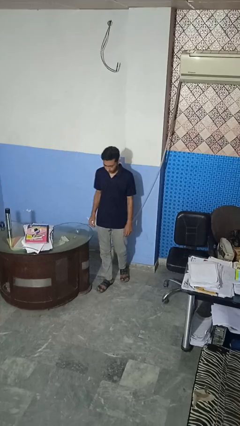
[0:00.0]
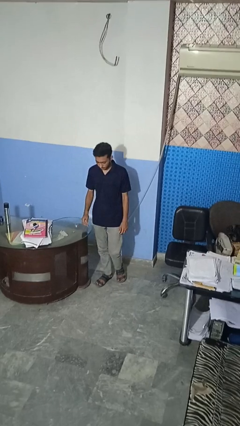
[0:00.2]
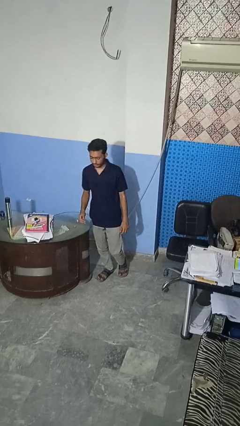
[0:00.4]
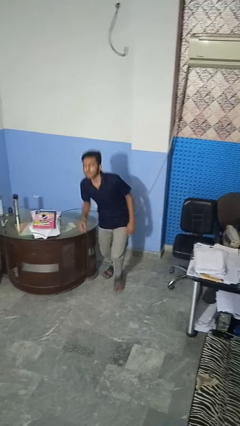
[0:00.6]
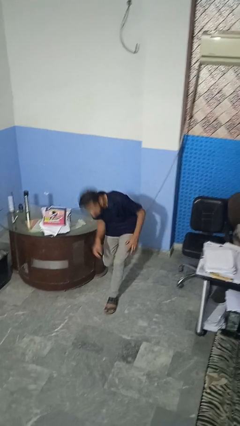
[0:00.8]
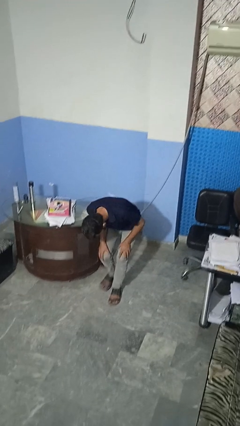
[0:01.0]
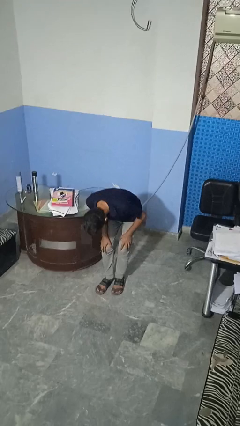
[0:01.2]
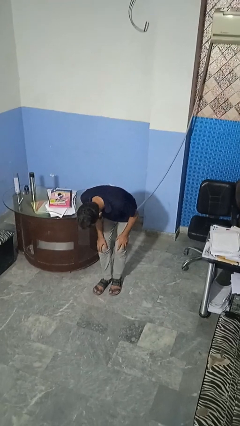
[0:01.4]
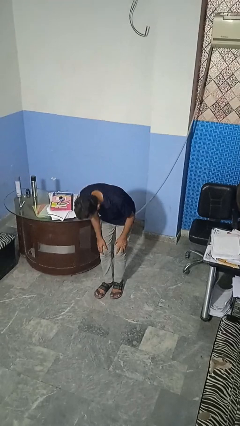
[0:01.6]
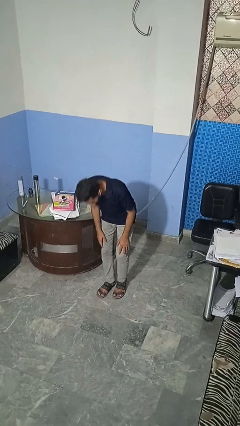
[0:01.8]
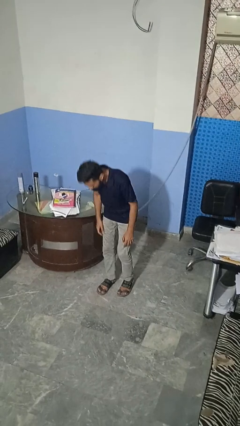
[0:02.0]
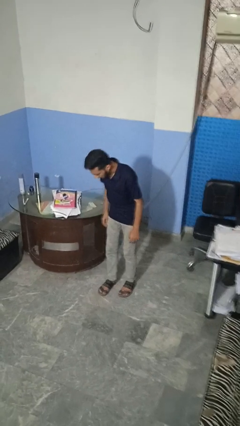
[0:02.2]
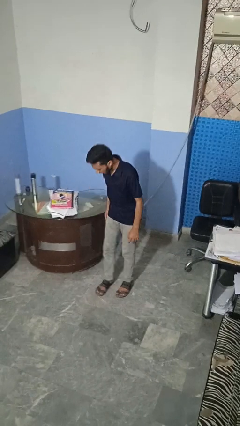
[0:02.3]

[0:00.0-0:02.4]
person bumps into table

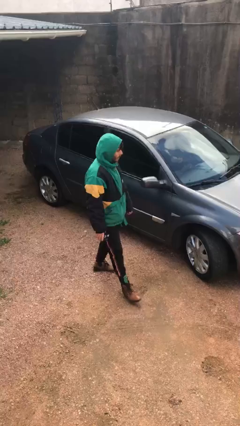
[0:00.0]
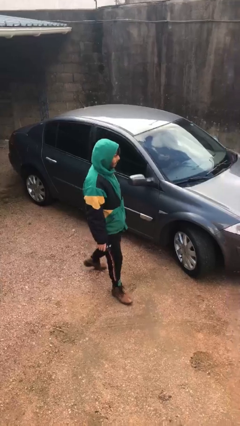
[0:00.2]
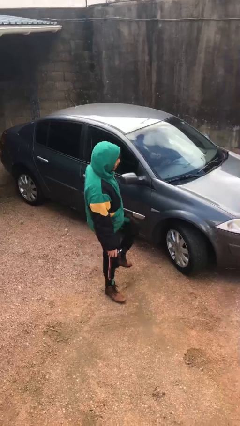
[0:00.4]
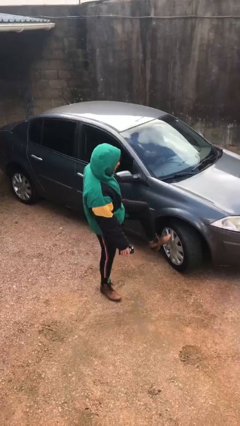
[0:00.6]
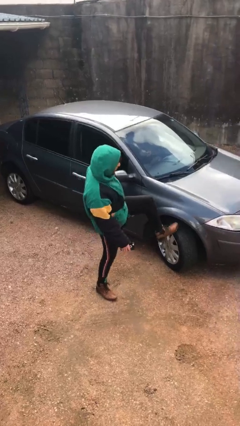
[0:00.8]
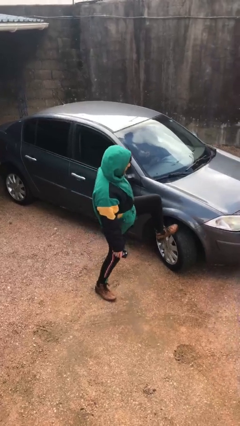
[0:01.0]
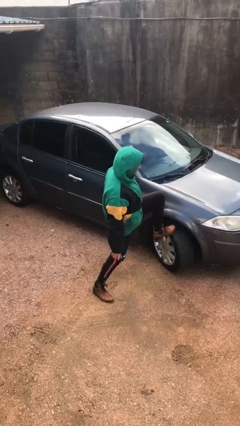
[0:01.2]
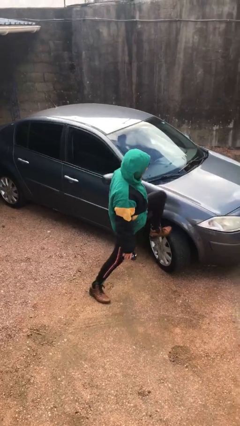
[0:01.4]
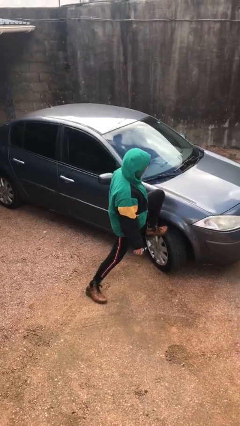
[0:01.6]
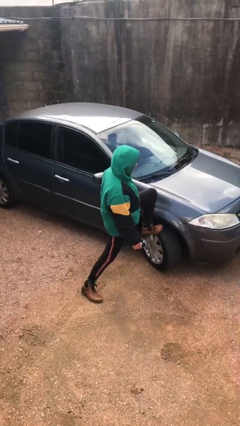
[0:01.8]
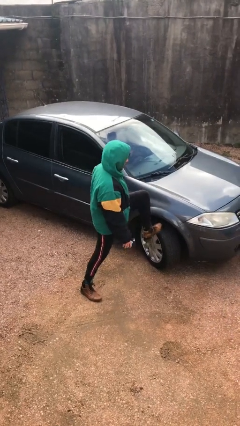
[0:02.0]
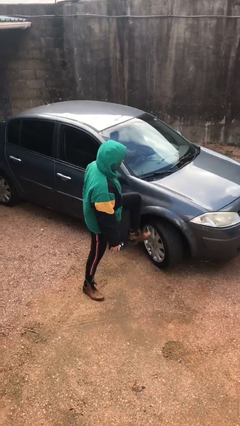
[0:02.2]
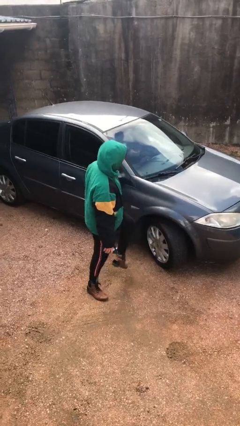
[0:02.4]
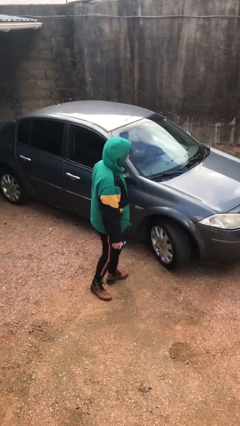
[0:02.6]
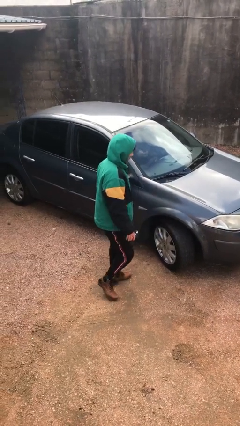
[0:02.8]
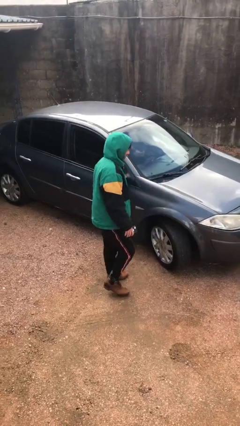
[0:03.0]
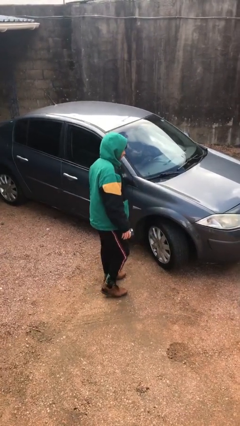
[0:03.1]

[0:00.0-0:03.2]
person kicks car tires

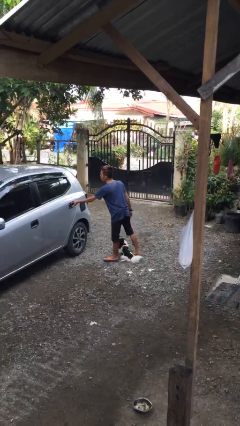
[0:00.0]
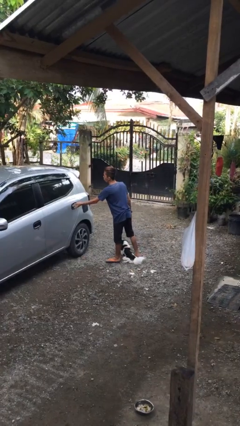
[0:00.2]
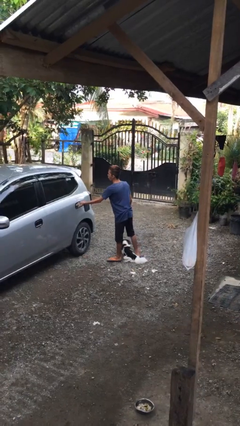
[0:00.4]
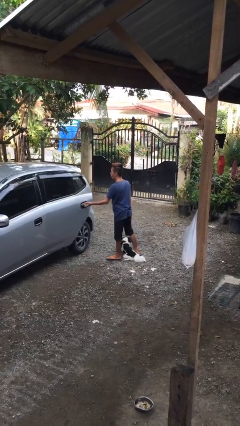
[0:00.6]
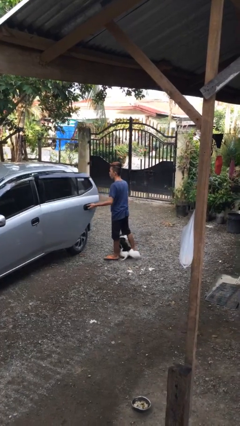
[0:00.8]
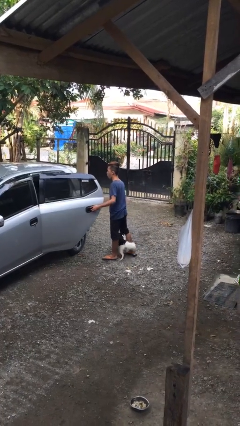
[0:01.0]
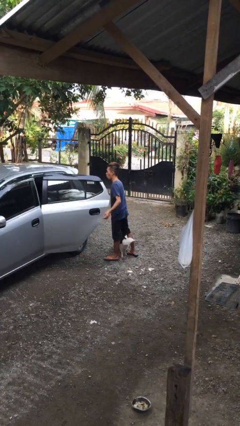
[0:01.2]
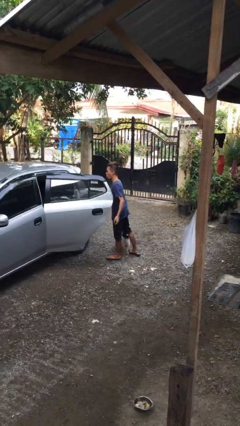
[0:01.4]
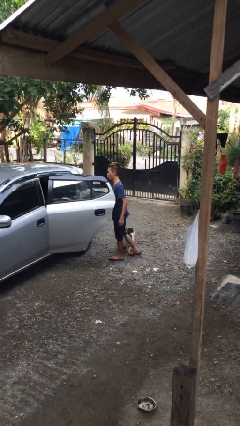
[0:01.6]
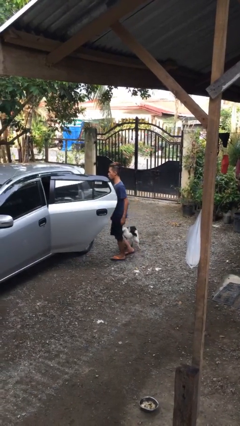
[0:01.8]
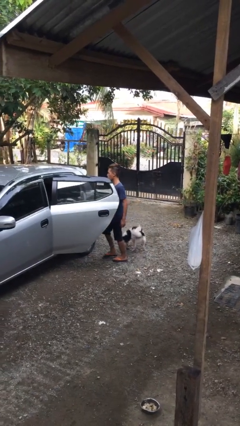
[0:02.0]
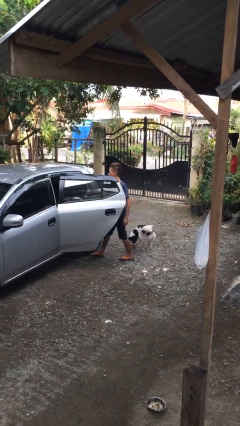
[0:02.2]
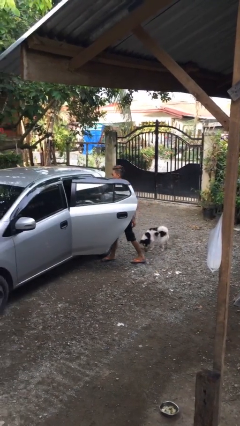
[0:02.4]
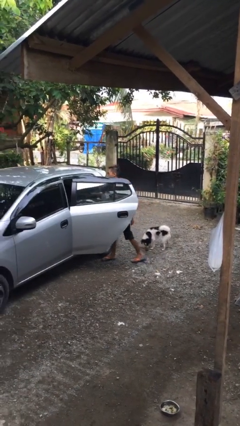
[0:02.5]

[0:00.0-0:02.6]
person opens car door

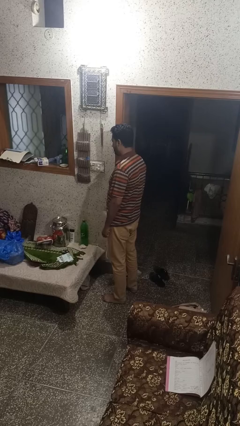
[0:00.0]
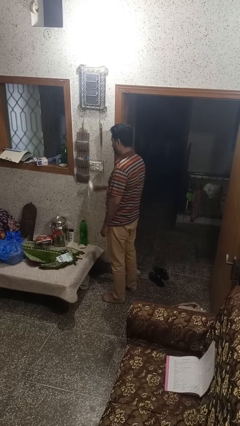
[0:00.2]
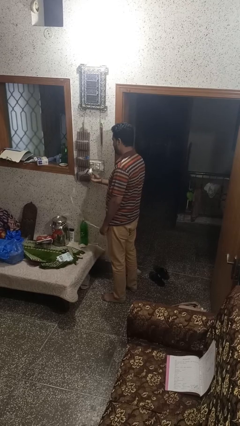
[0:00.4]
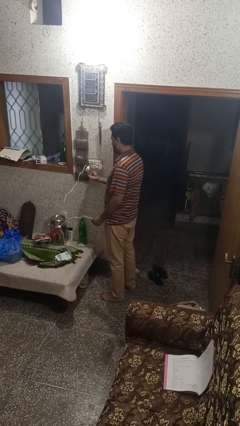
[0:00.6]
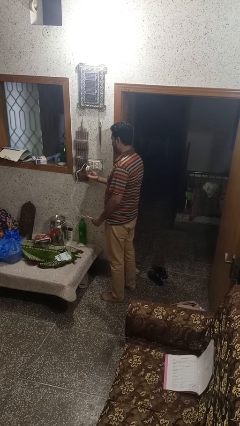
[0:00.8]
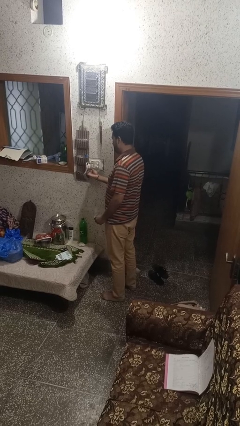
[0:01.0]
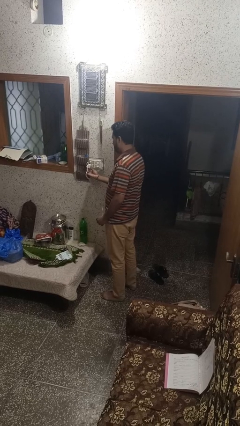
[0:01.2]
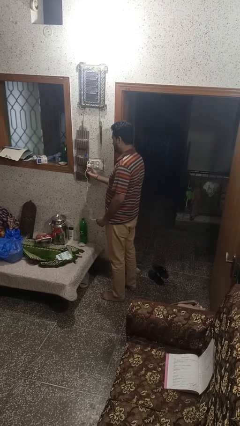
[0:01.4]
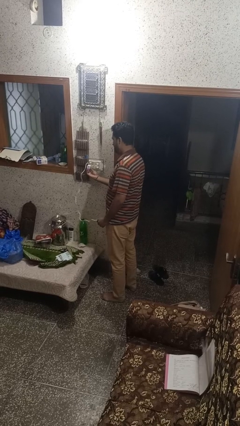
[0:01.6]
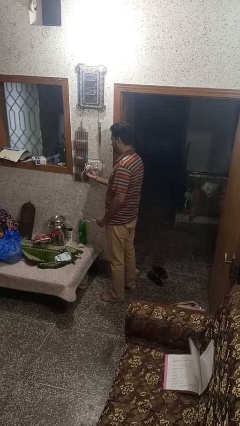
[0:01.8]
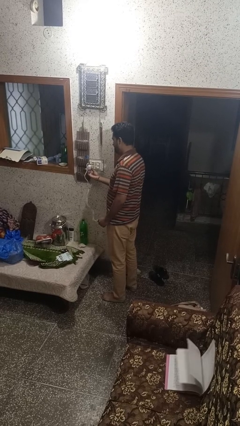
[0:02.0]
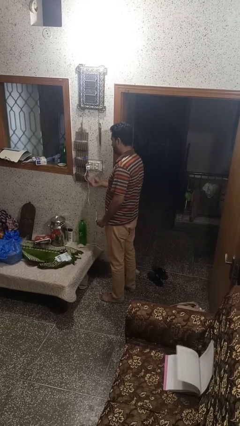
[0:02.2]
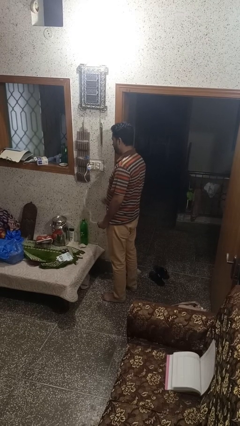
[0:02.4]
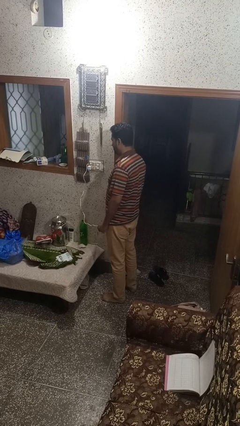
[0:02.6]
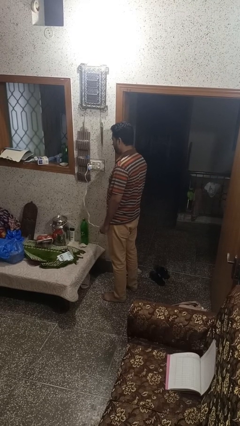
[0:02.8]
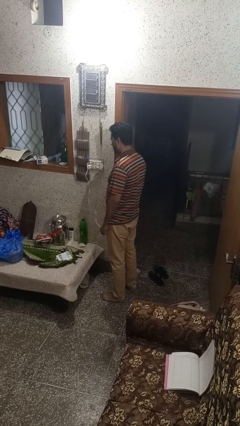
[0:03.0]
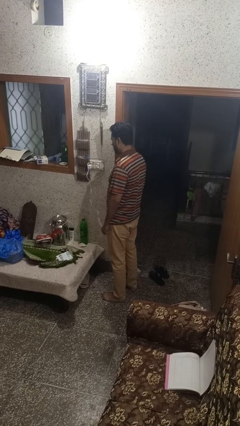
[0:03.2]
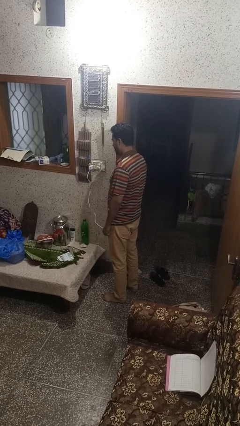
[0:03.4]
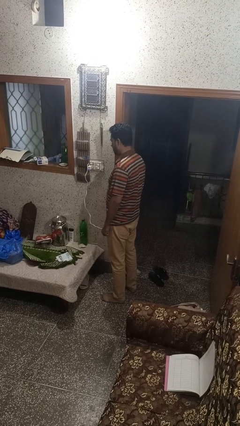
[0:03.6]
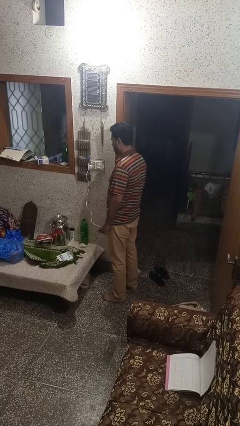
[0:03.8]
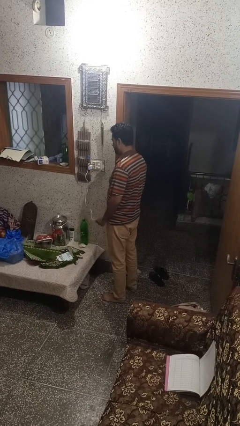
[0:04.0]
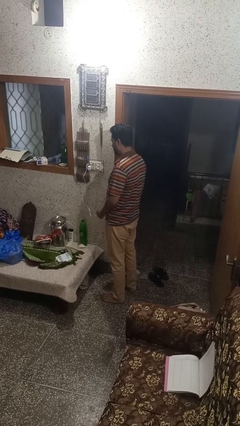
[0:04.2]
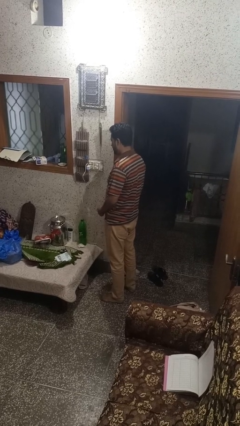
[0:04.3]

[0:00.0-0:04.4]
person plugs into electrical socket

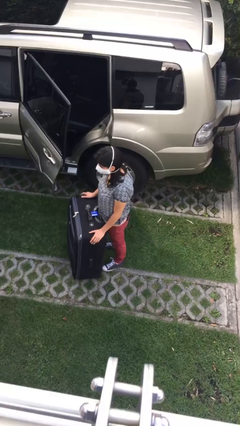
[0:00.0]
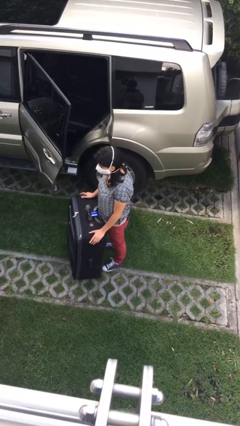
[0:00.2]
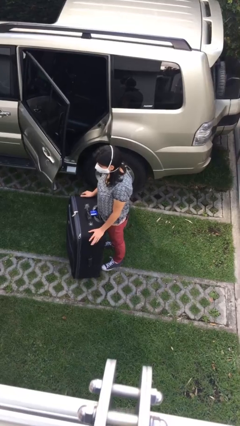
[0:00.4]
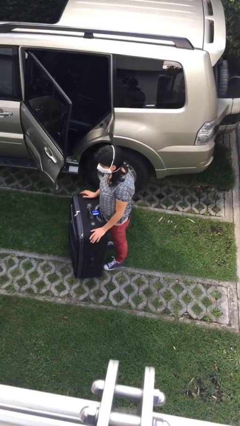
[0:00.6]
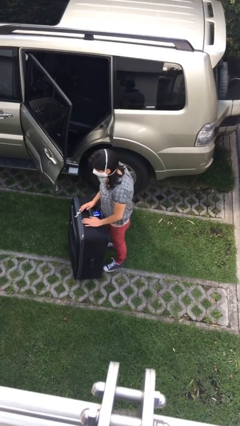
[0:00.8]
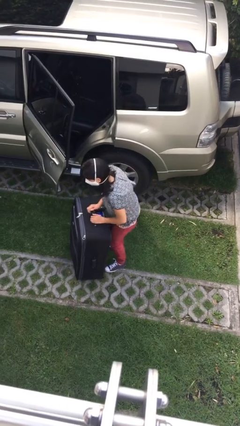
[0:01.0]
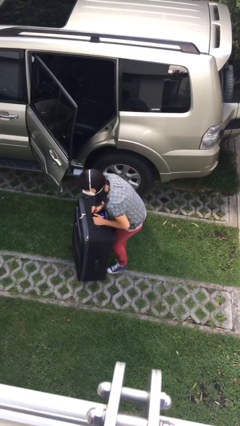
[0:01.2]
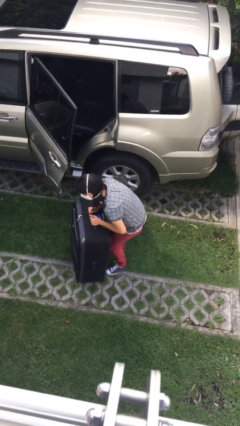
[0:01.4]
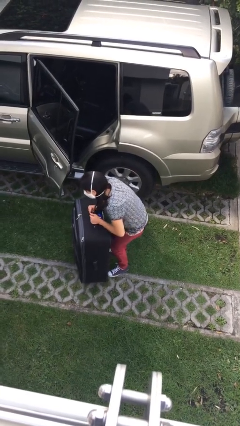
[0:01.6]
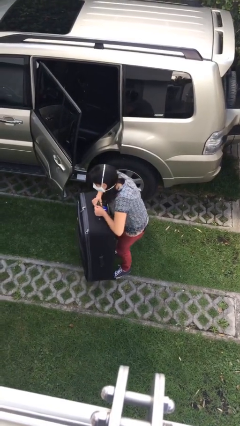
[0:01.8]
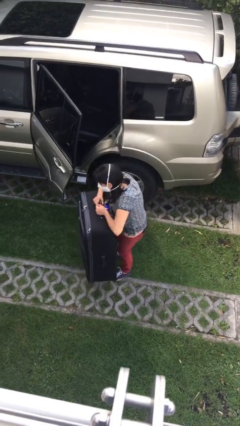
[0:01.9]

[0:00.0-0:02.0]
person picks up object from floor

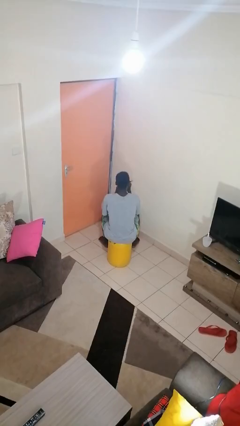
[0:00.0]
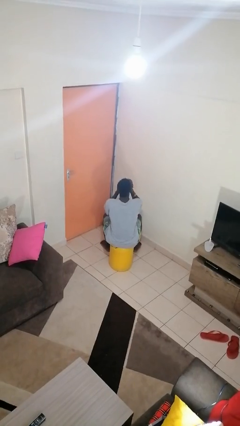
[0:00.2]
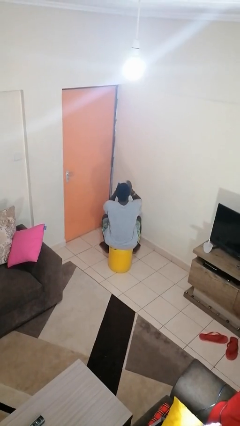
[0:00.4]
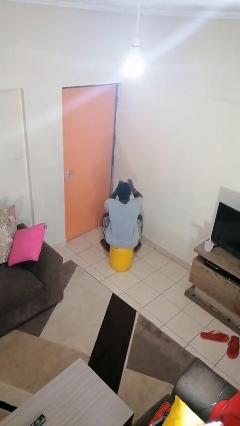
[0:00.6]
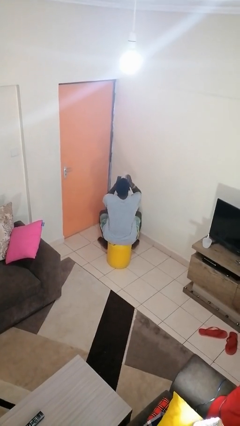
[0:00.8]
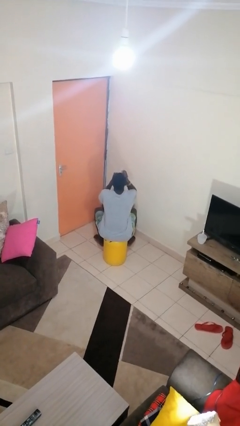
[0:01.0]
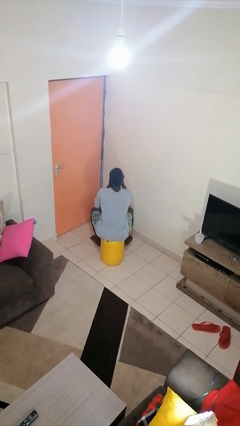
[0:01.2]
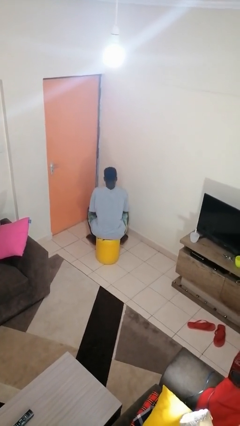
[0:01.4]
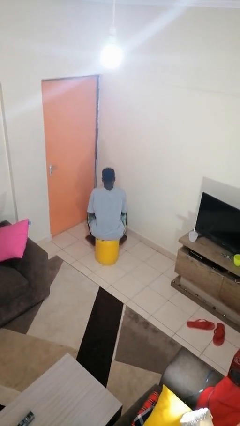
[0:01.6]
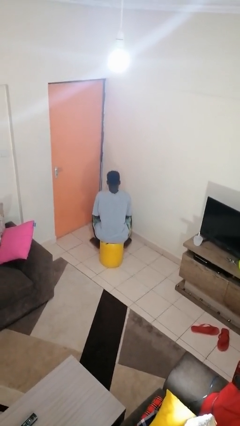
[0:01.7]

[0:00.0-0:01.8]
person drinks from mug

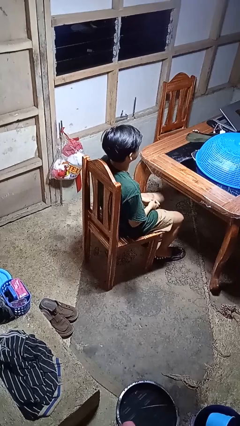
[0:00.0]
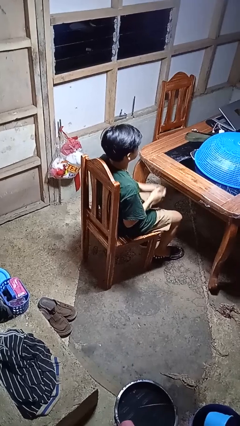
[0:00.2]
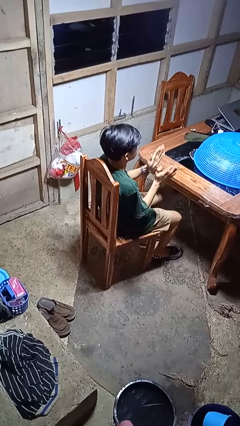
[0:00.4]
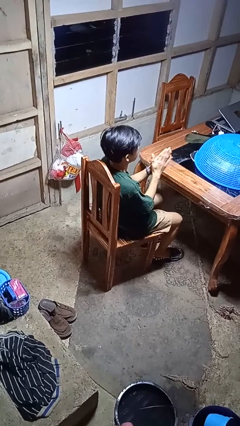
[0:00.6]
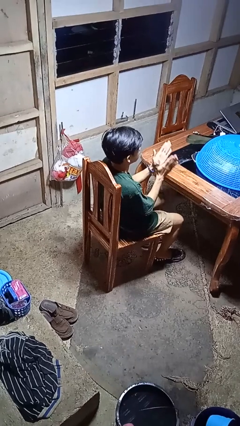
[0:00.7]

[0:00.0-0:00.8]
person claps hands

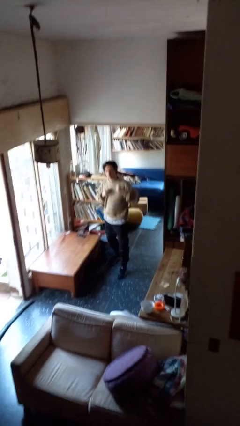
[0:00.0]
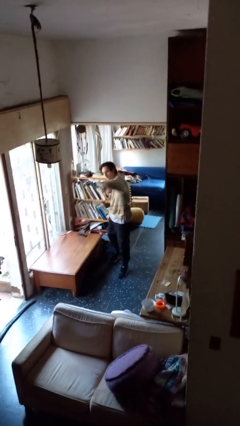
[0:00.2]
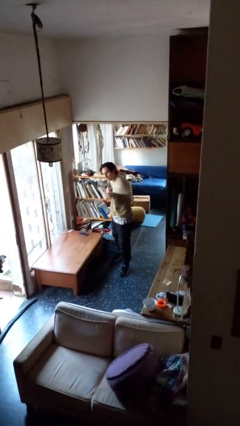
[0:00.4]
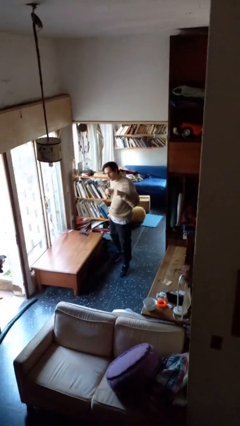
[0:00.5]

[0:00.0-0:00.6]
person karate chop
